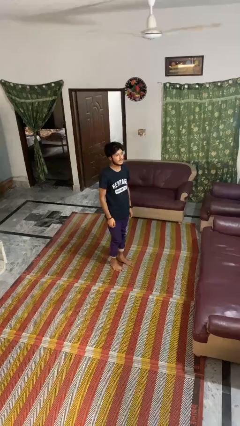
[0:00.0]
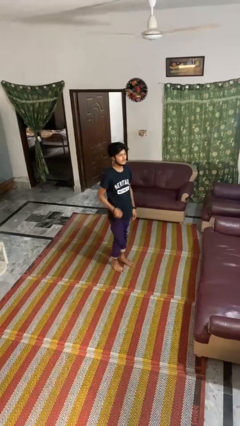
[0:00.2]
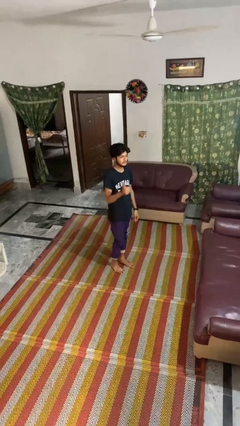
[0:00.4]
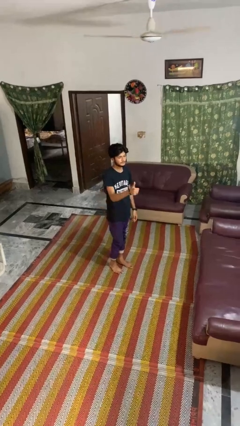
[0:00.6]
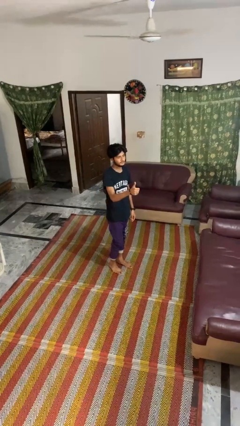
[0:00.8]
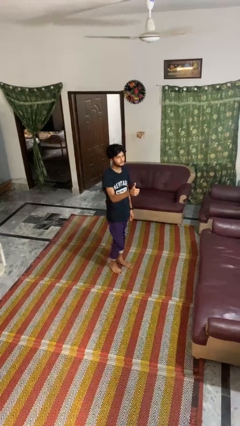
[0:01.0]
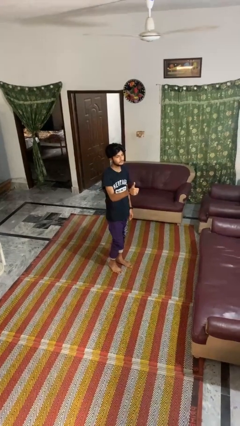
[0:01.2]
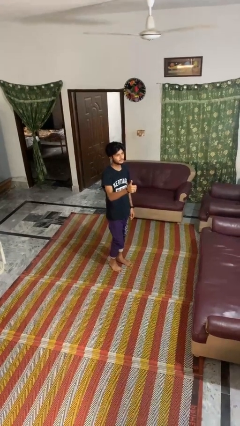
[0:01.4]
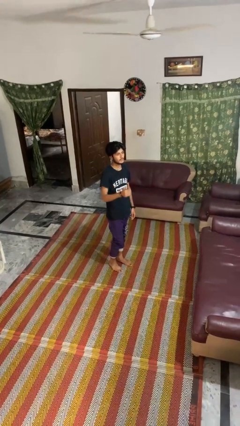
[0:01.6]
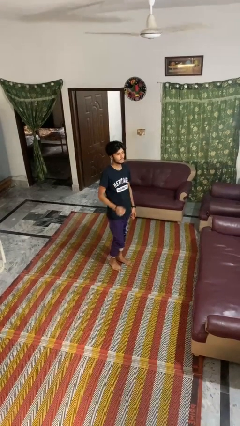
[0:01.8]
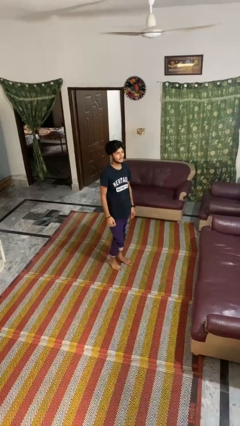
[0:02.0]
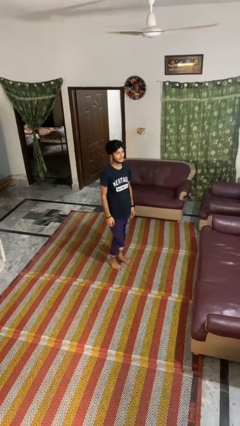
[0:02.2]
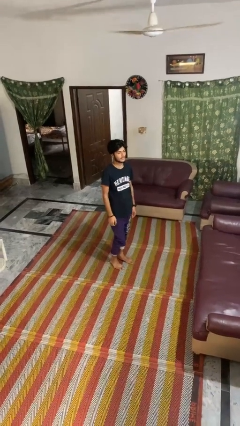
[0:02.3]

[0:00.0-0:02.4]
person gestures thumbs up

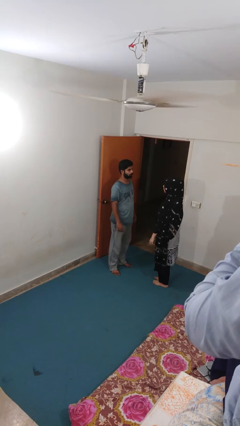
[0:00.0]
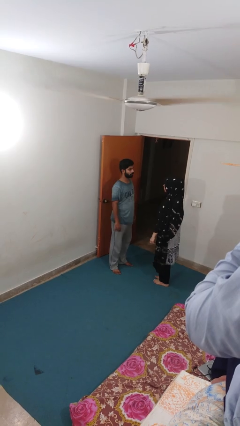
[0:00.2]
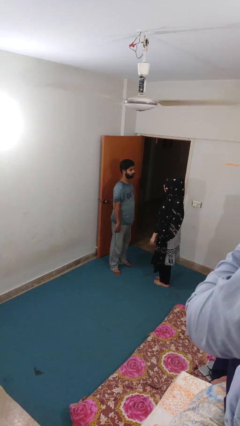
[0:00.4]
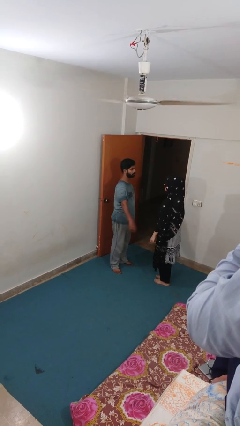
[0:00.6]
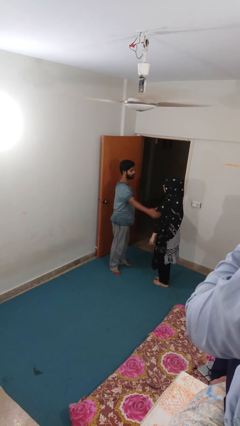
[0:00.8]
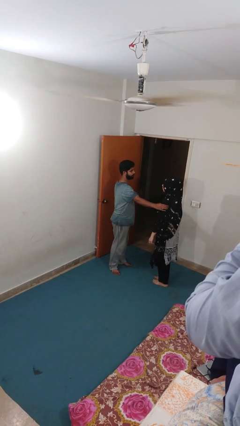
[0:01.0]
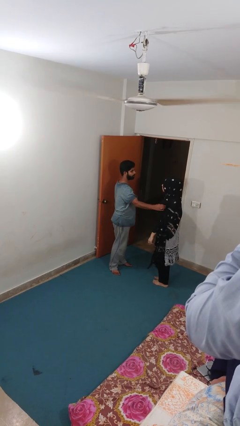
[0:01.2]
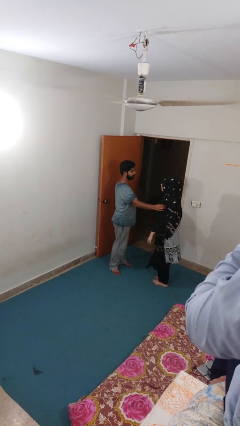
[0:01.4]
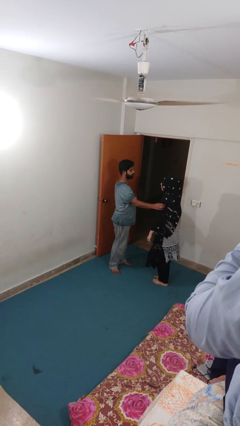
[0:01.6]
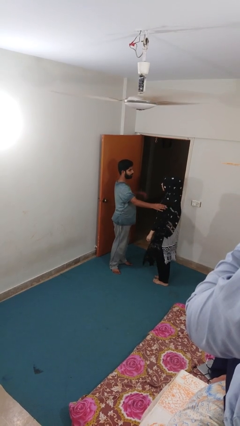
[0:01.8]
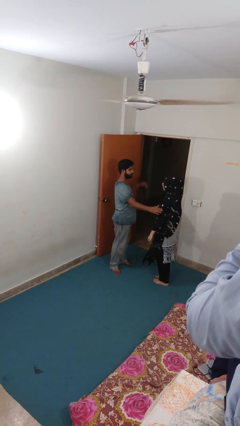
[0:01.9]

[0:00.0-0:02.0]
person grabs person by bicep

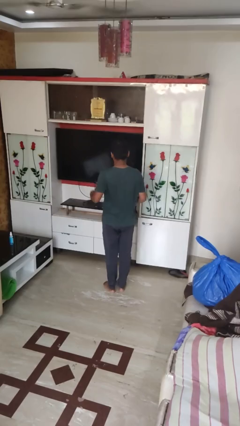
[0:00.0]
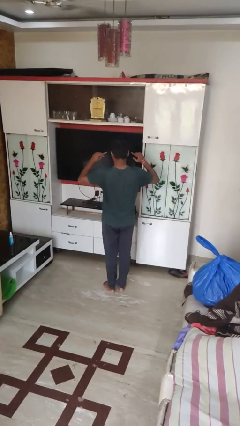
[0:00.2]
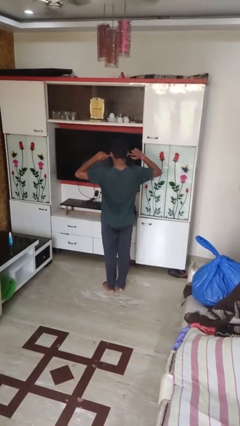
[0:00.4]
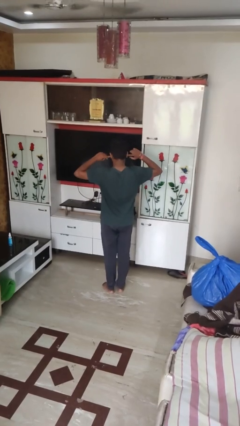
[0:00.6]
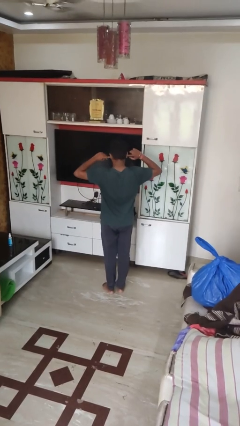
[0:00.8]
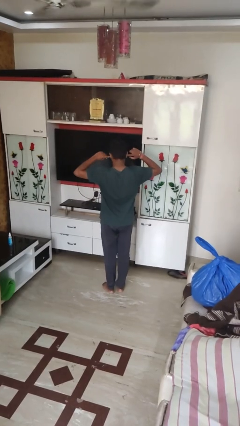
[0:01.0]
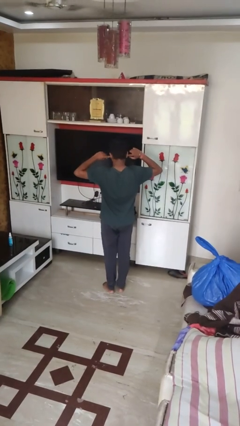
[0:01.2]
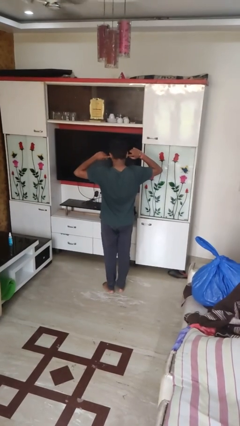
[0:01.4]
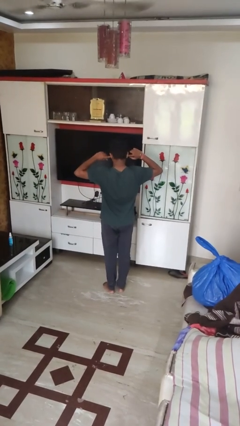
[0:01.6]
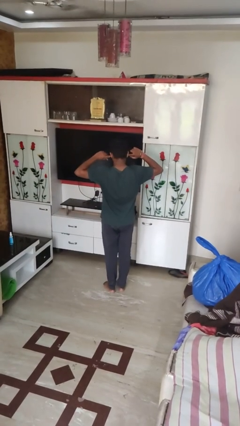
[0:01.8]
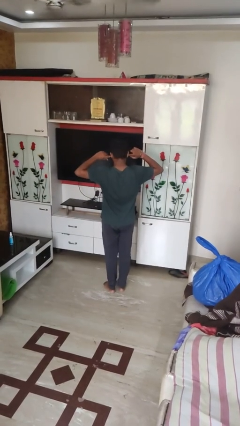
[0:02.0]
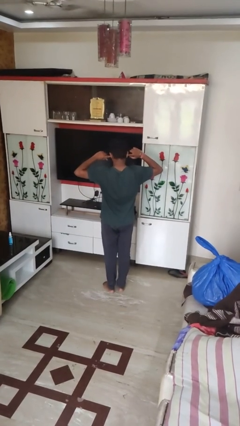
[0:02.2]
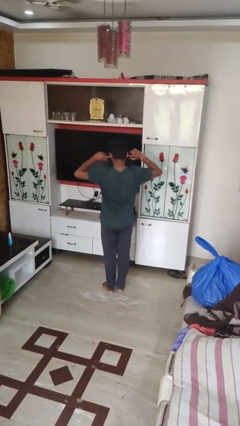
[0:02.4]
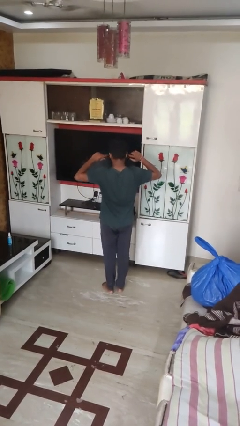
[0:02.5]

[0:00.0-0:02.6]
person puts fingers in ear

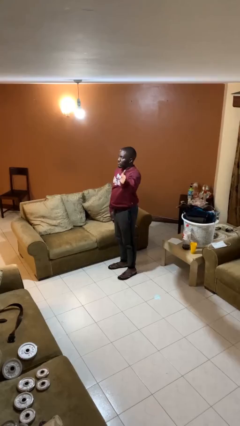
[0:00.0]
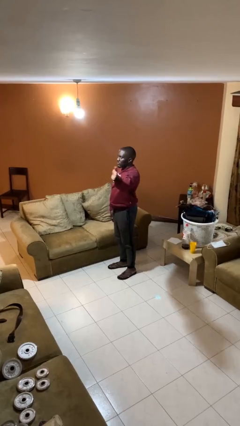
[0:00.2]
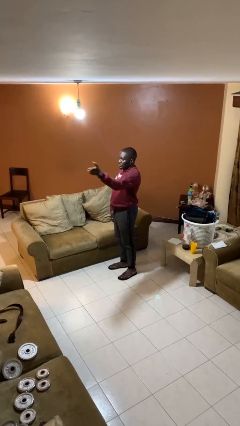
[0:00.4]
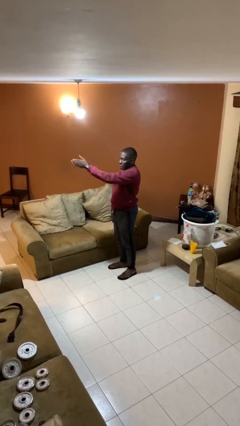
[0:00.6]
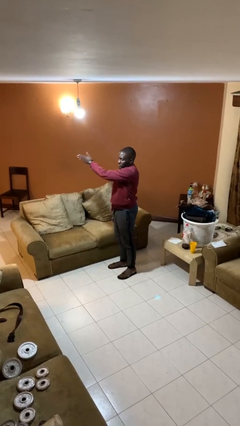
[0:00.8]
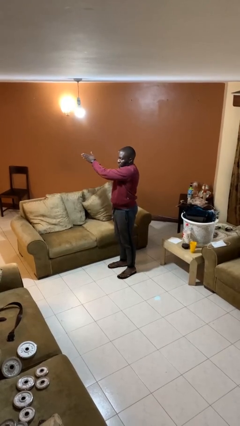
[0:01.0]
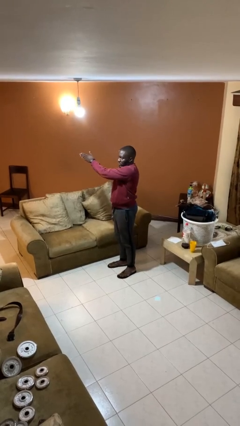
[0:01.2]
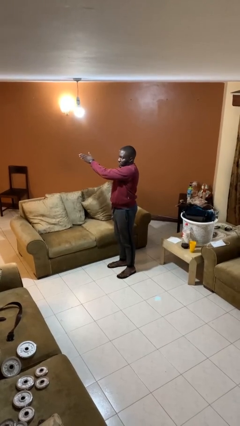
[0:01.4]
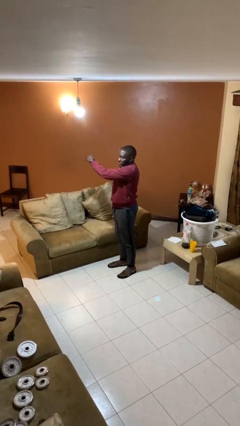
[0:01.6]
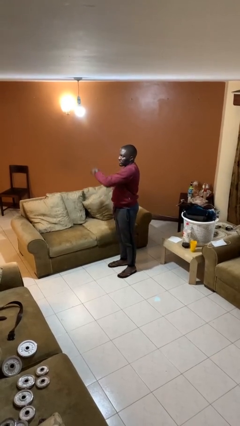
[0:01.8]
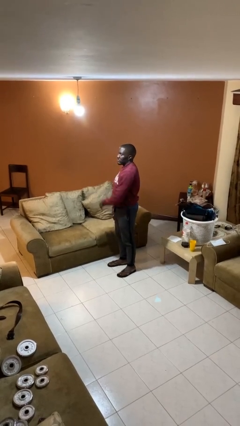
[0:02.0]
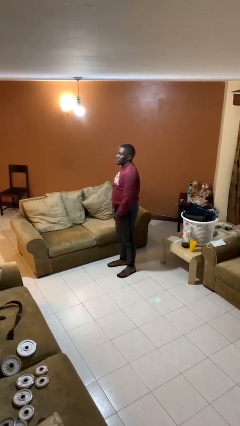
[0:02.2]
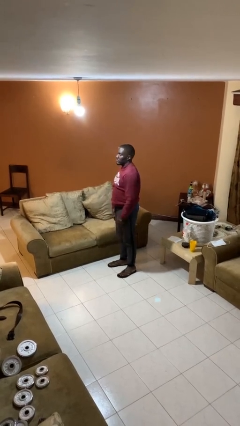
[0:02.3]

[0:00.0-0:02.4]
person gestures swipe right

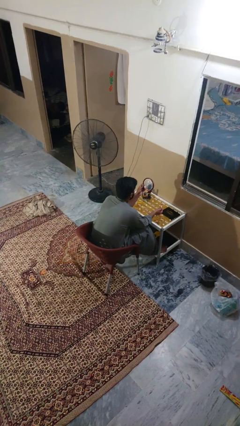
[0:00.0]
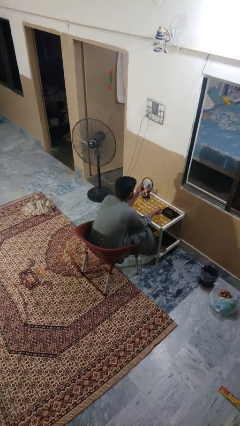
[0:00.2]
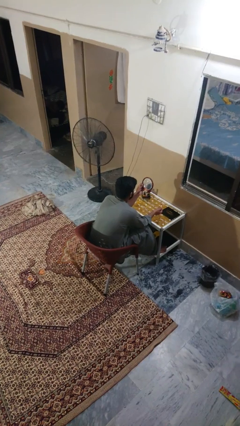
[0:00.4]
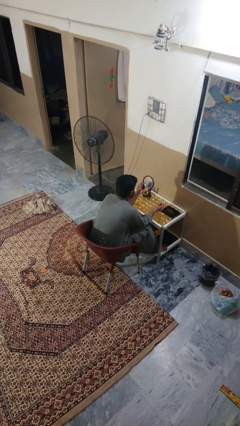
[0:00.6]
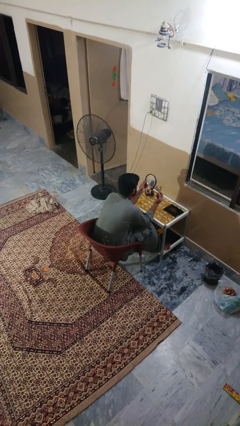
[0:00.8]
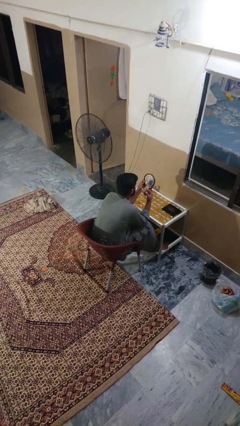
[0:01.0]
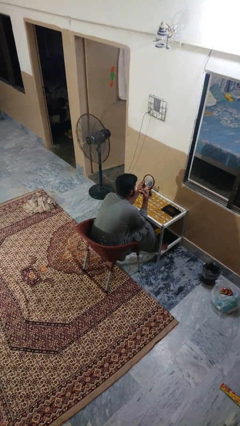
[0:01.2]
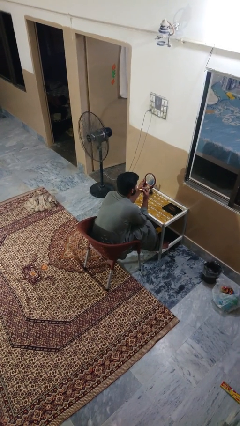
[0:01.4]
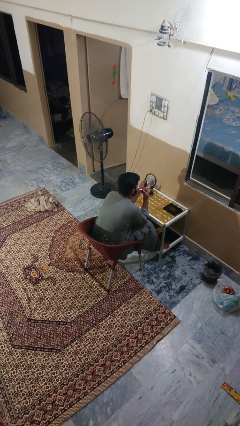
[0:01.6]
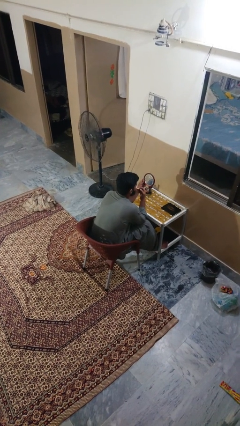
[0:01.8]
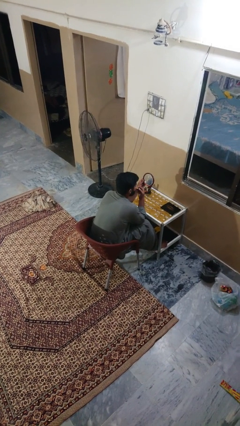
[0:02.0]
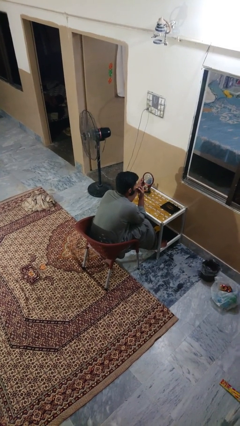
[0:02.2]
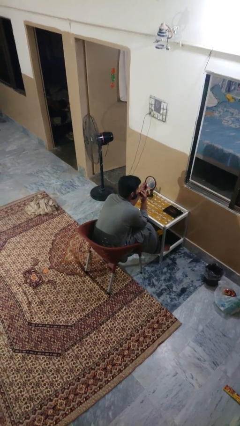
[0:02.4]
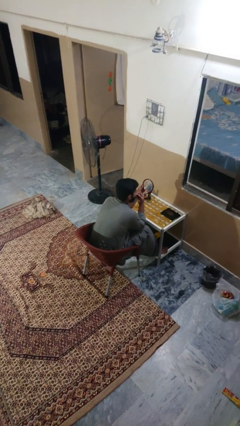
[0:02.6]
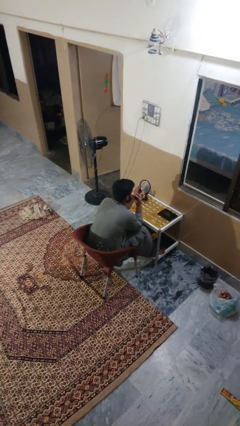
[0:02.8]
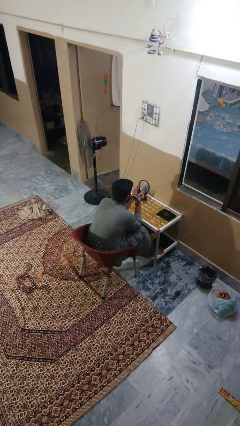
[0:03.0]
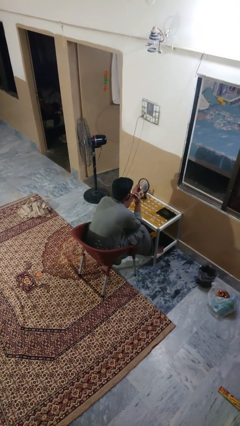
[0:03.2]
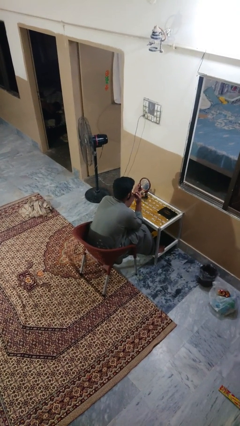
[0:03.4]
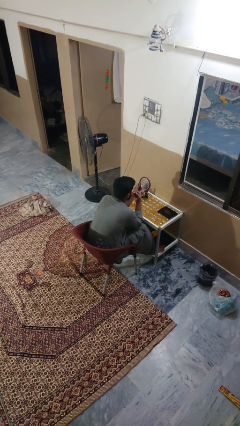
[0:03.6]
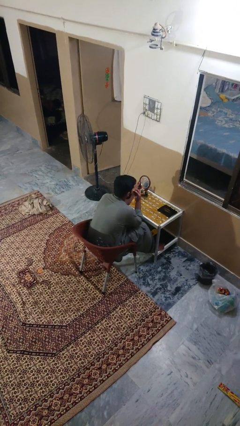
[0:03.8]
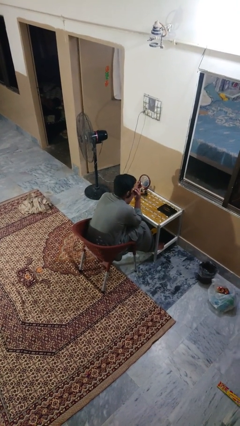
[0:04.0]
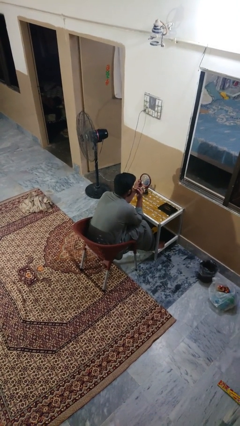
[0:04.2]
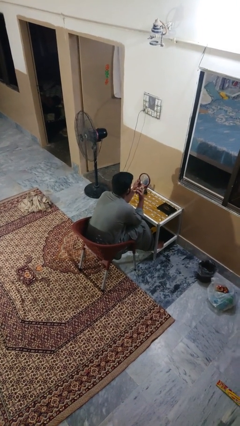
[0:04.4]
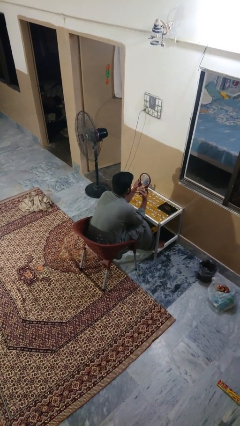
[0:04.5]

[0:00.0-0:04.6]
person applies lip makeup

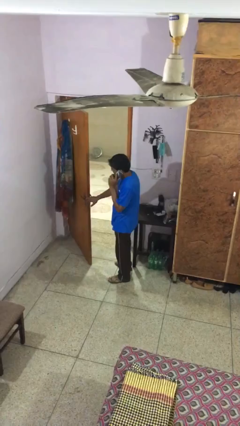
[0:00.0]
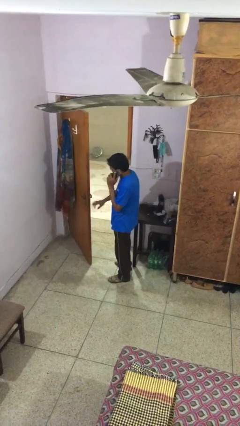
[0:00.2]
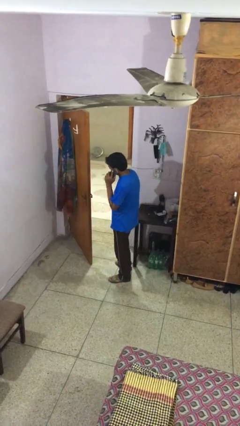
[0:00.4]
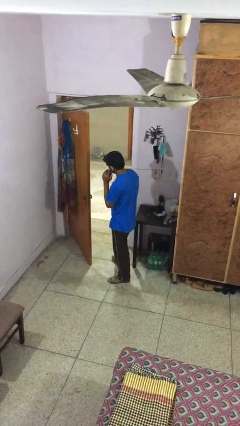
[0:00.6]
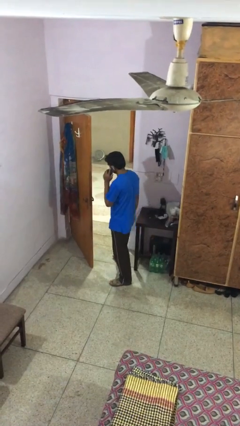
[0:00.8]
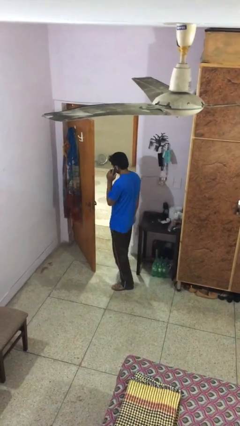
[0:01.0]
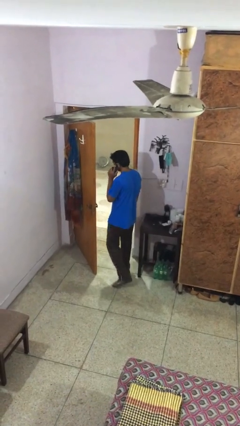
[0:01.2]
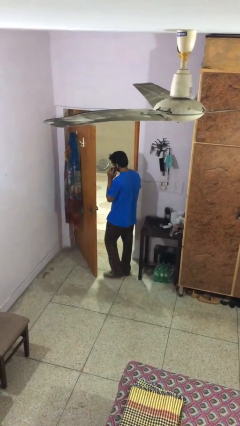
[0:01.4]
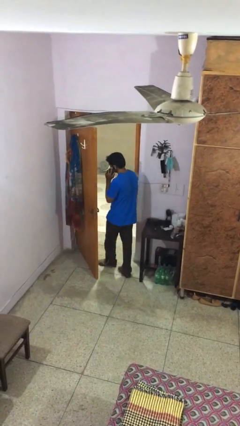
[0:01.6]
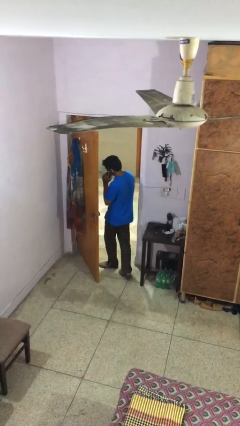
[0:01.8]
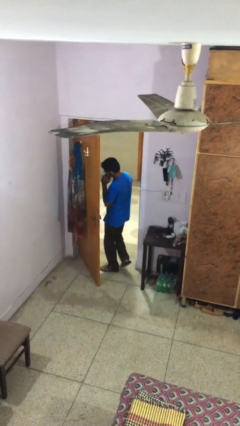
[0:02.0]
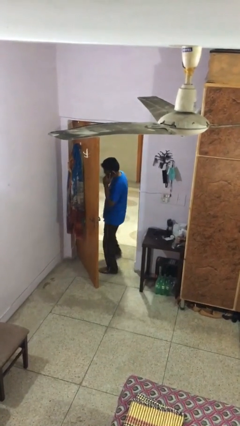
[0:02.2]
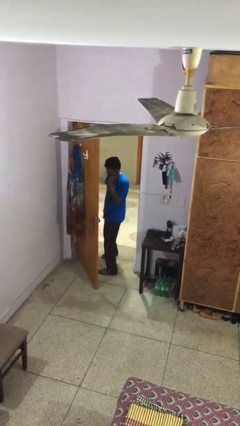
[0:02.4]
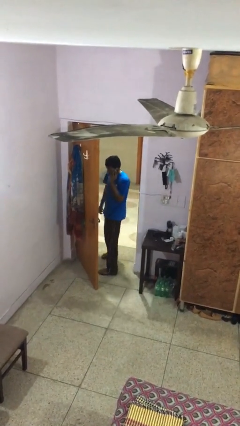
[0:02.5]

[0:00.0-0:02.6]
person exits scene through structure

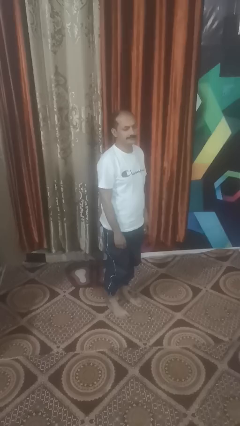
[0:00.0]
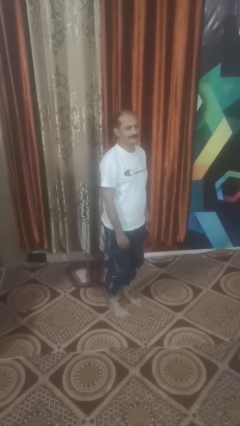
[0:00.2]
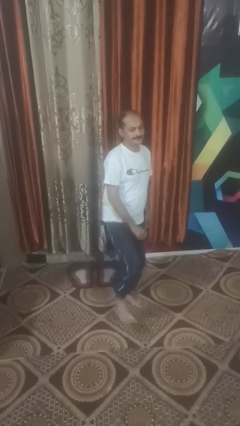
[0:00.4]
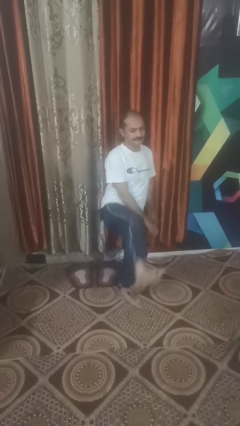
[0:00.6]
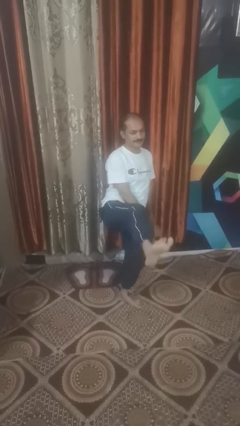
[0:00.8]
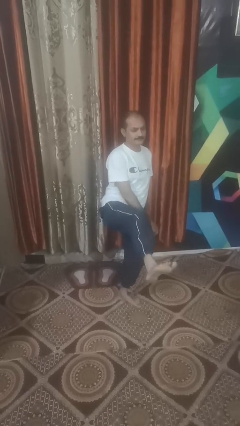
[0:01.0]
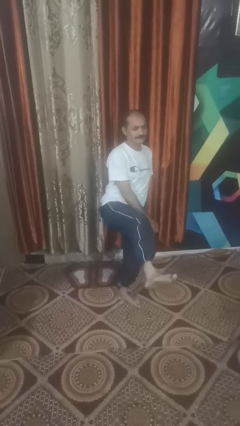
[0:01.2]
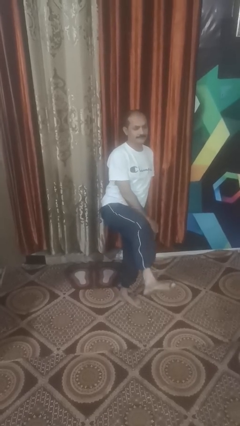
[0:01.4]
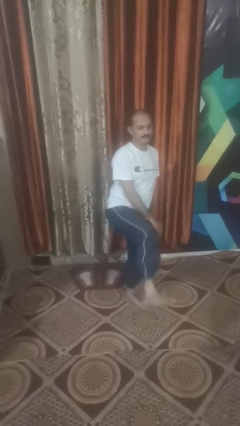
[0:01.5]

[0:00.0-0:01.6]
person karate kicks
